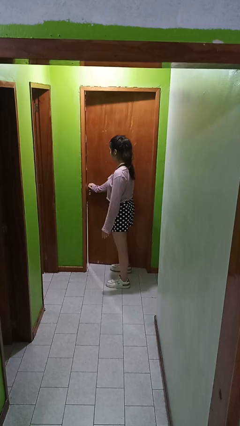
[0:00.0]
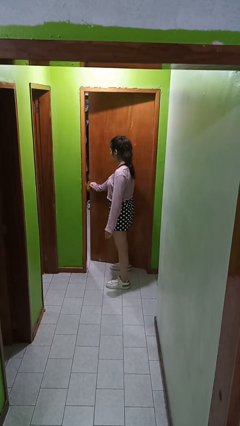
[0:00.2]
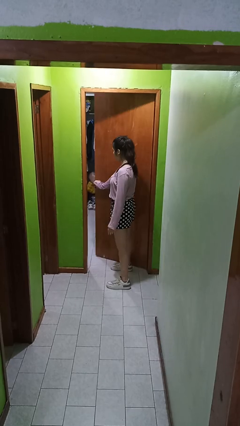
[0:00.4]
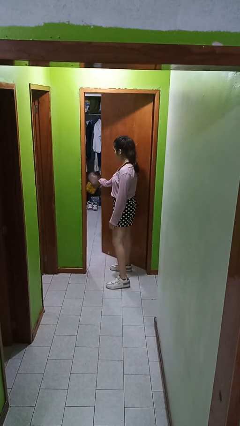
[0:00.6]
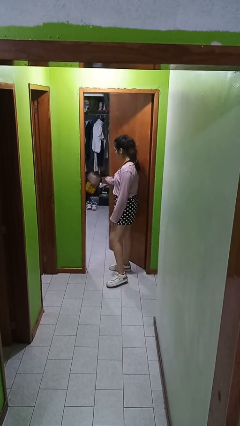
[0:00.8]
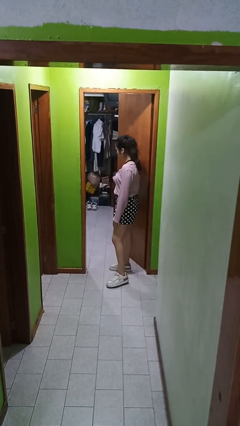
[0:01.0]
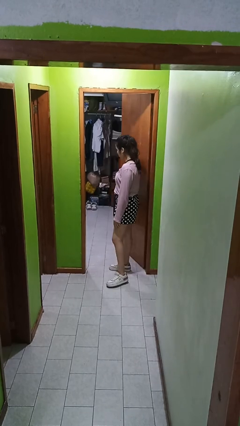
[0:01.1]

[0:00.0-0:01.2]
person opens facility door

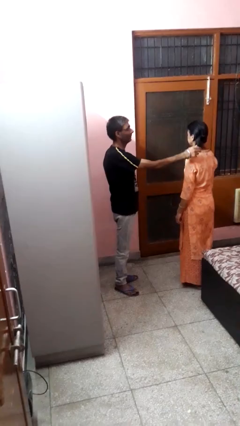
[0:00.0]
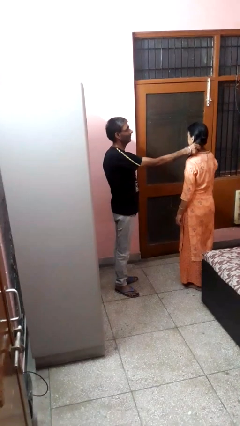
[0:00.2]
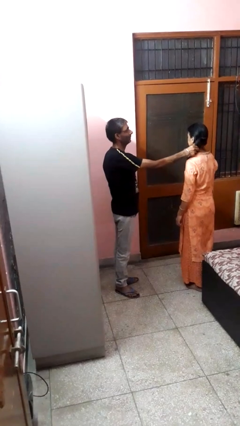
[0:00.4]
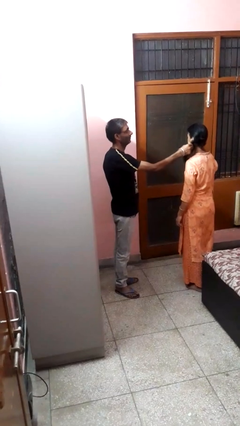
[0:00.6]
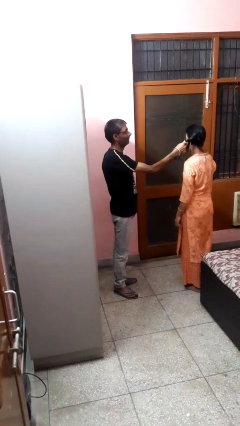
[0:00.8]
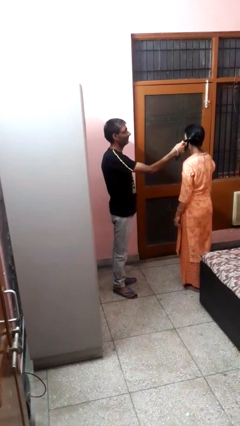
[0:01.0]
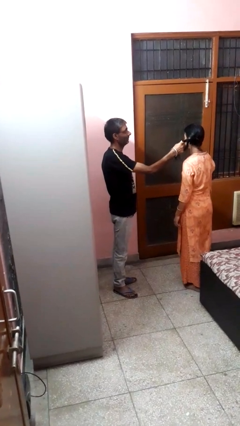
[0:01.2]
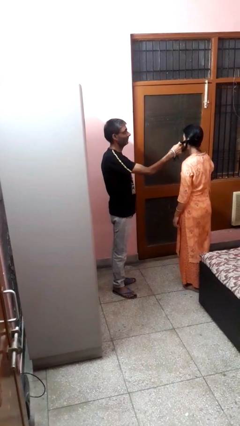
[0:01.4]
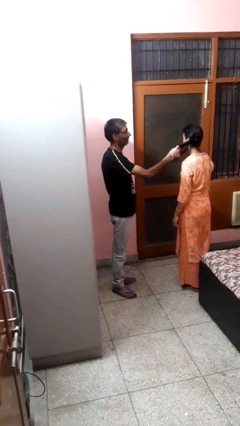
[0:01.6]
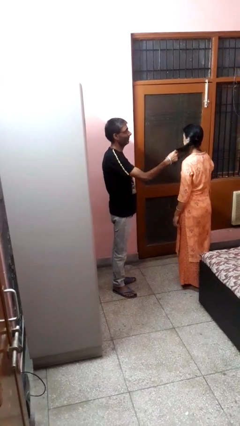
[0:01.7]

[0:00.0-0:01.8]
person grabs person by hair

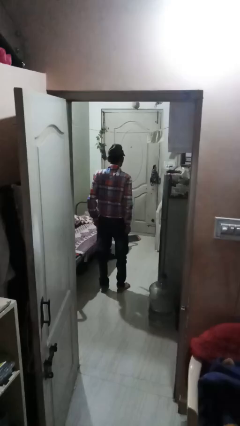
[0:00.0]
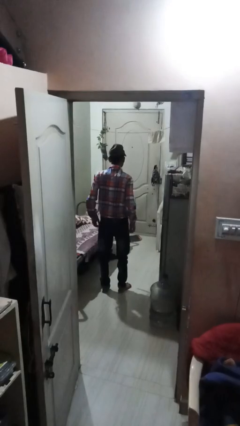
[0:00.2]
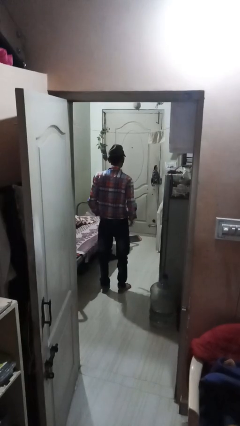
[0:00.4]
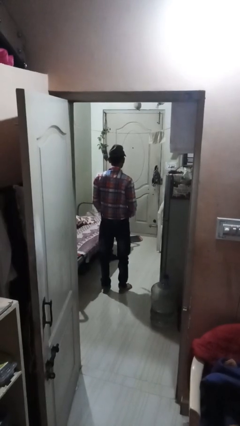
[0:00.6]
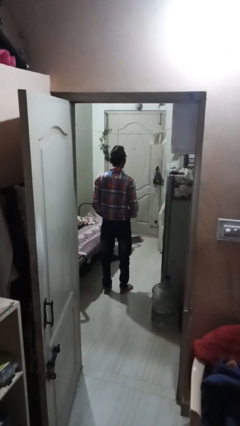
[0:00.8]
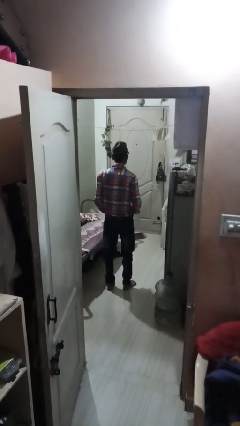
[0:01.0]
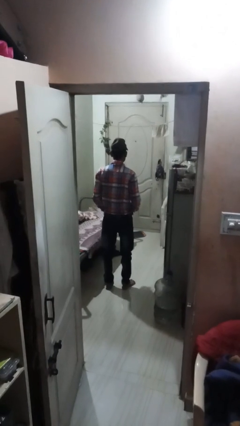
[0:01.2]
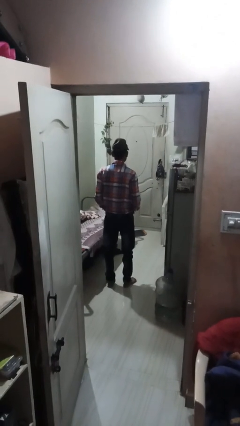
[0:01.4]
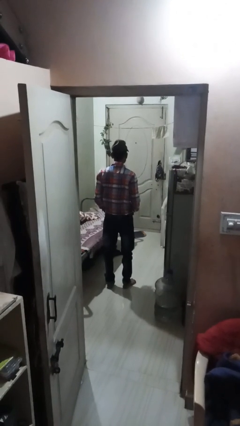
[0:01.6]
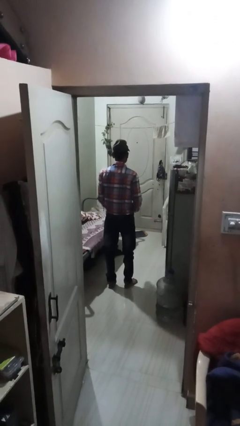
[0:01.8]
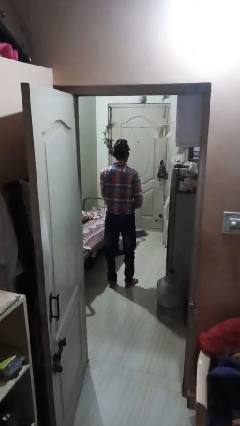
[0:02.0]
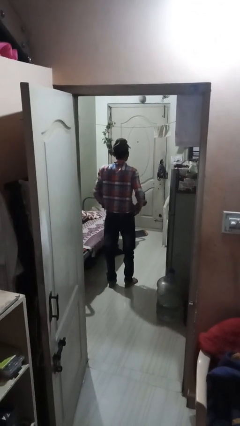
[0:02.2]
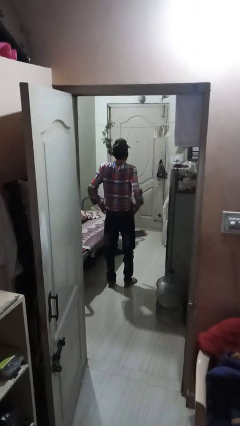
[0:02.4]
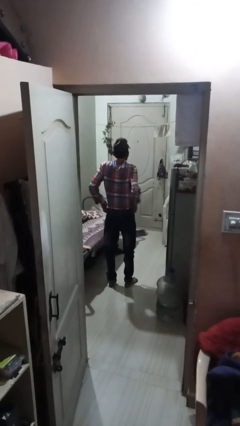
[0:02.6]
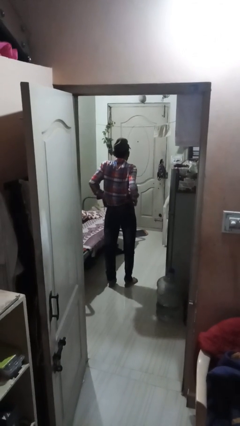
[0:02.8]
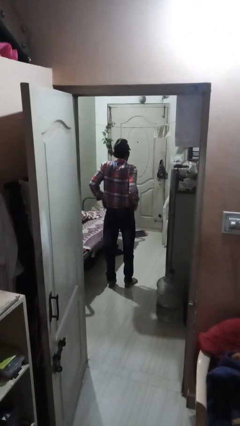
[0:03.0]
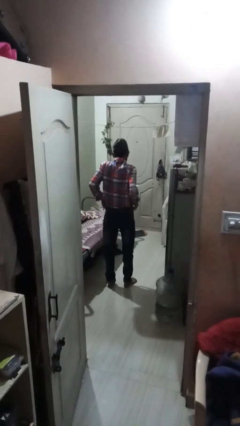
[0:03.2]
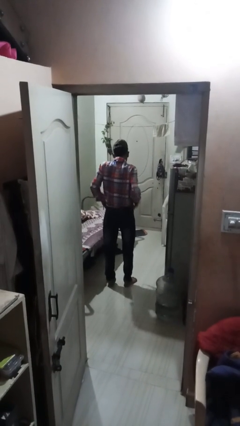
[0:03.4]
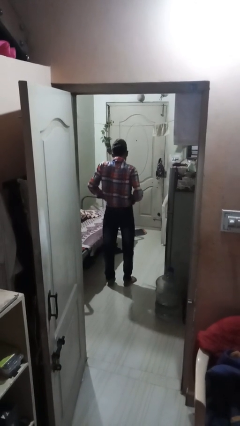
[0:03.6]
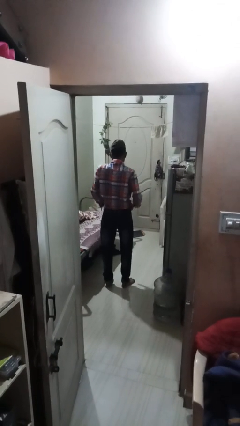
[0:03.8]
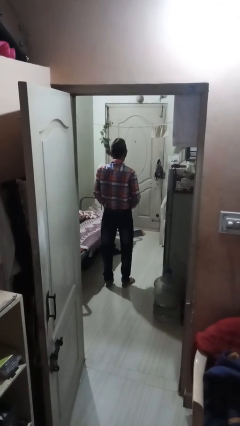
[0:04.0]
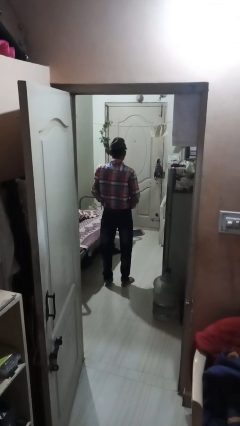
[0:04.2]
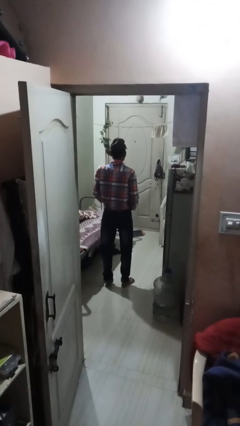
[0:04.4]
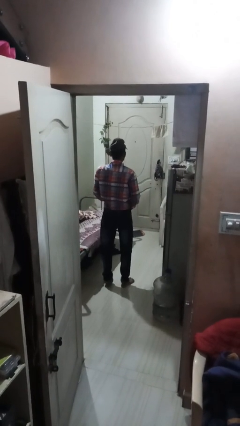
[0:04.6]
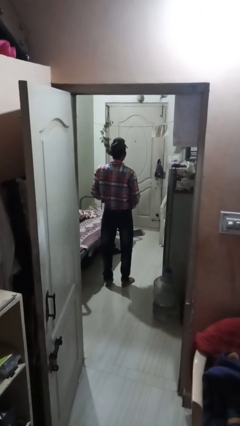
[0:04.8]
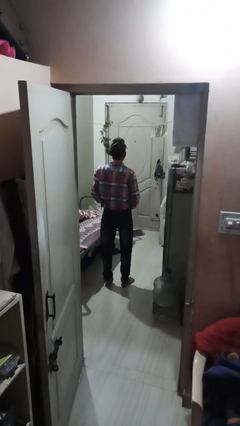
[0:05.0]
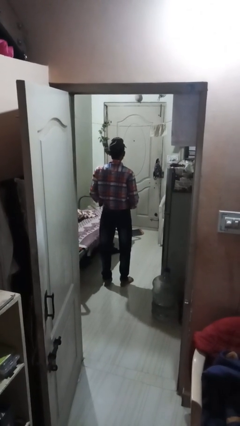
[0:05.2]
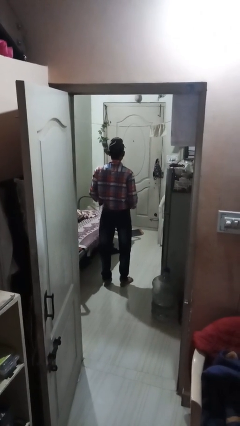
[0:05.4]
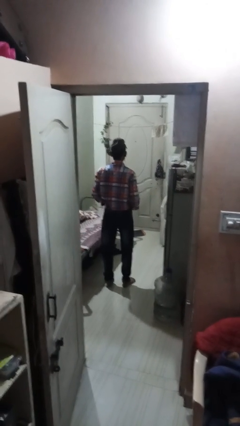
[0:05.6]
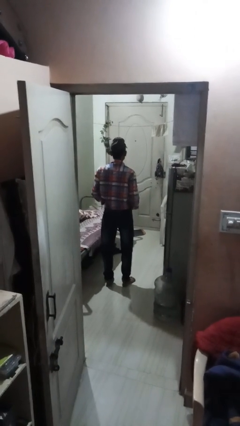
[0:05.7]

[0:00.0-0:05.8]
person hikes up pants

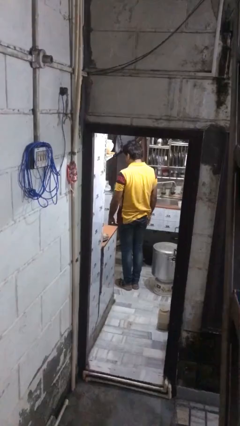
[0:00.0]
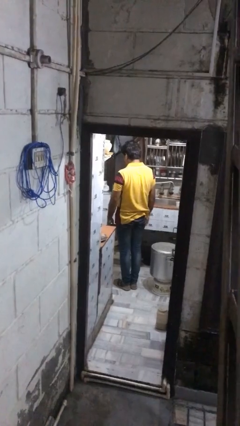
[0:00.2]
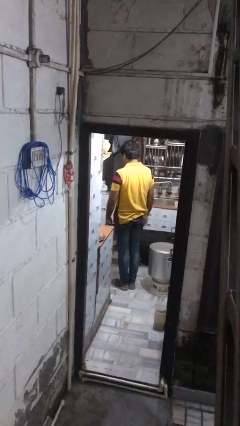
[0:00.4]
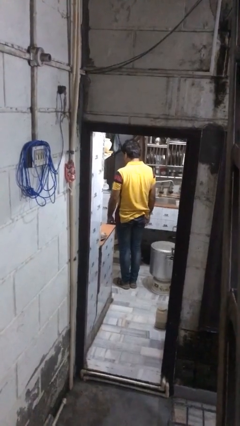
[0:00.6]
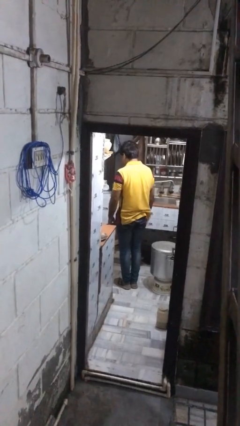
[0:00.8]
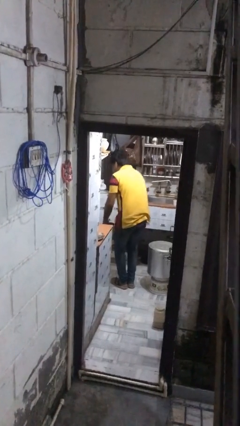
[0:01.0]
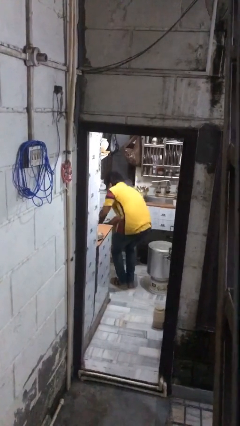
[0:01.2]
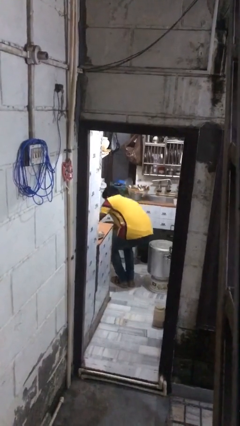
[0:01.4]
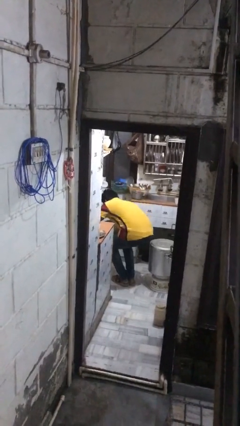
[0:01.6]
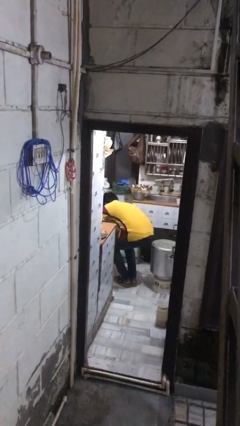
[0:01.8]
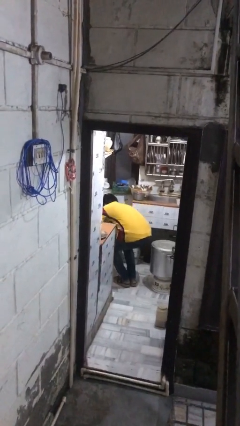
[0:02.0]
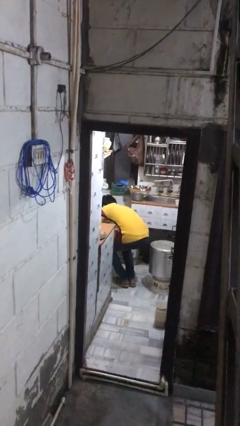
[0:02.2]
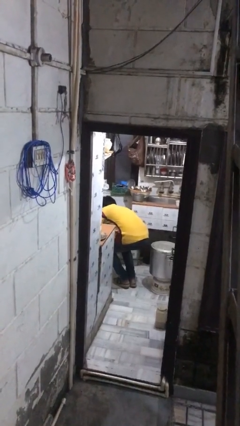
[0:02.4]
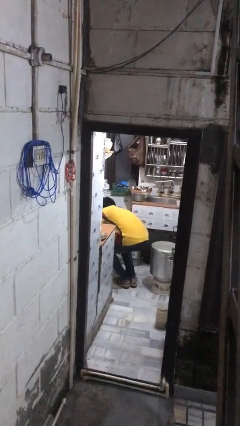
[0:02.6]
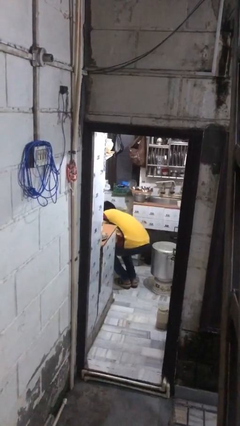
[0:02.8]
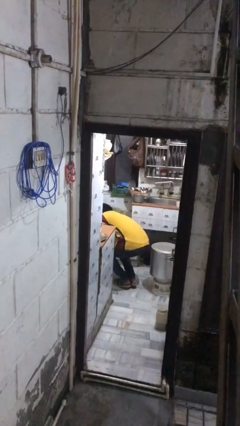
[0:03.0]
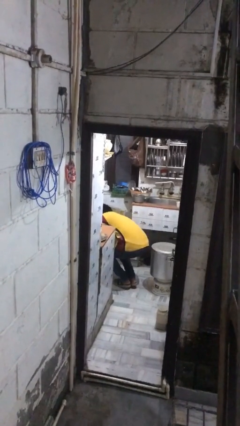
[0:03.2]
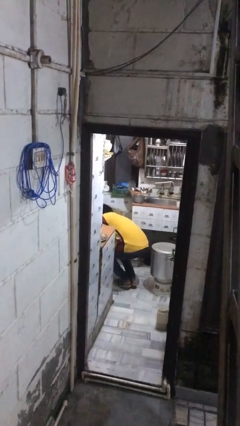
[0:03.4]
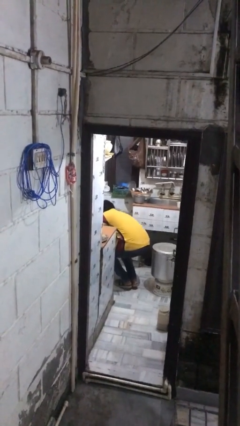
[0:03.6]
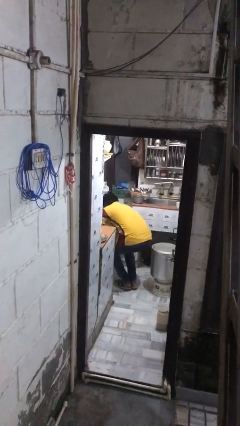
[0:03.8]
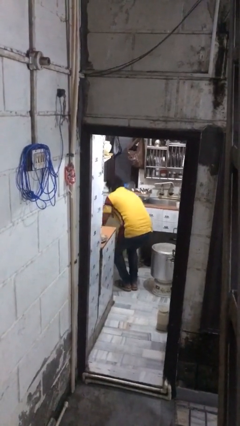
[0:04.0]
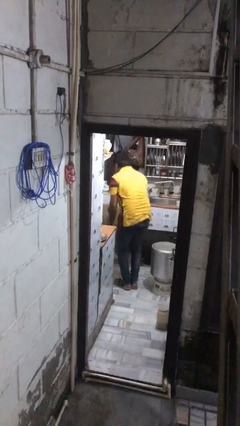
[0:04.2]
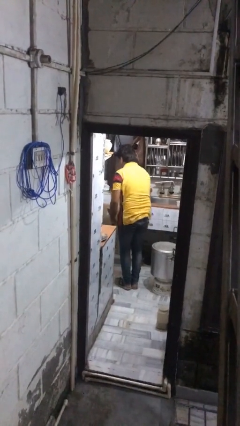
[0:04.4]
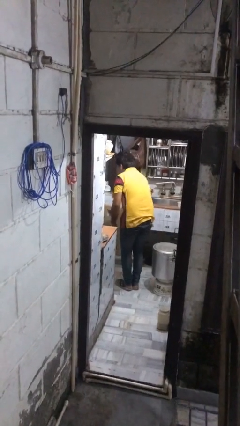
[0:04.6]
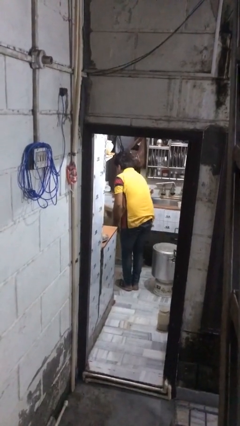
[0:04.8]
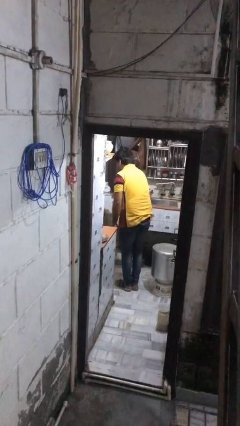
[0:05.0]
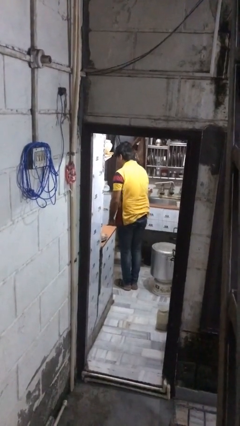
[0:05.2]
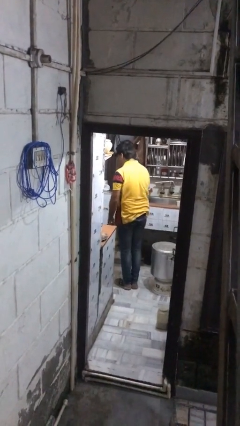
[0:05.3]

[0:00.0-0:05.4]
person searches in kitchen drawer

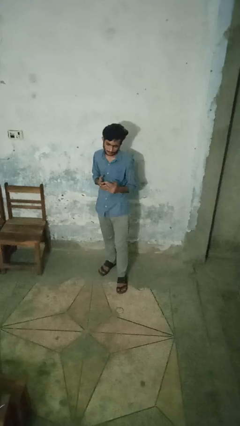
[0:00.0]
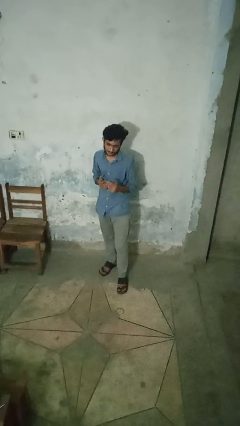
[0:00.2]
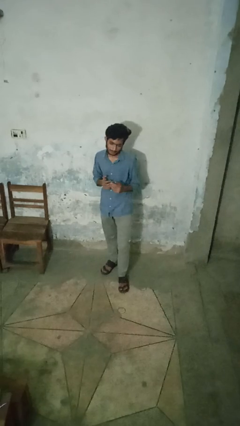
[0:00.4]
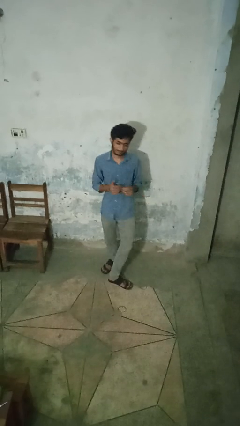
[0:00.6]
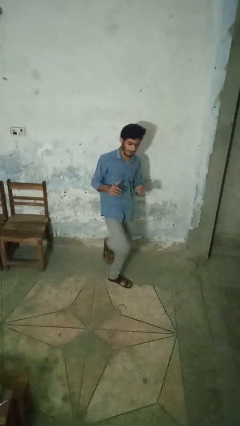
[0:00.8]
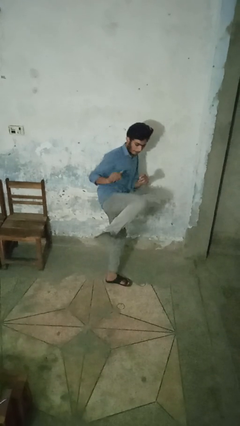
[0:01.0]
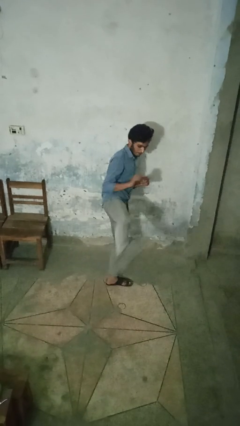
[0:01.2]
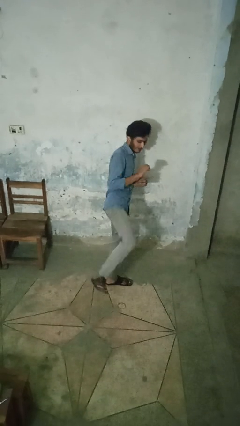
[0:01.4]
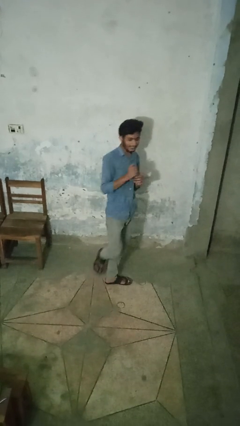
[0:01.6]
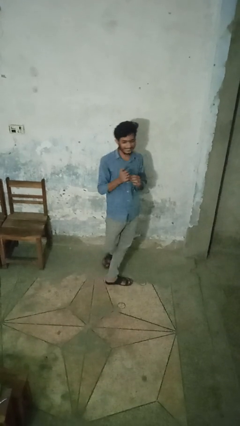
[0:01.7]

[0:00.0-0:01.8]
person karate kicks

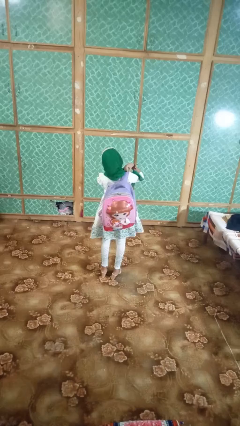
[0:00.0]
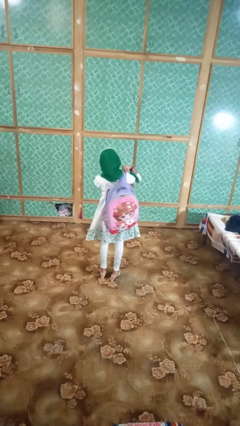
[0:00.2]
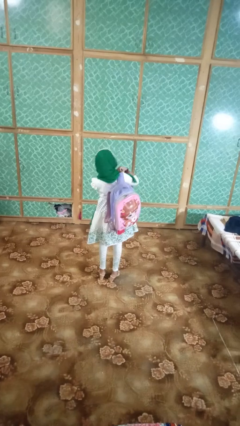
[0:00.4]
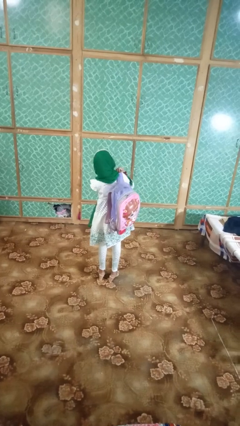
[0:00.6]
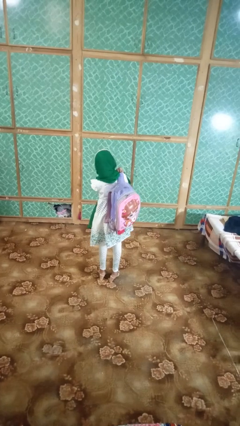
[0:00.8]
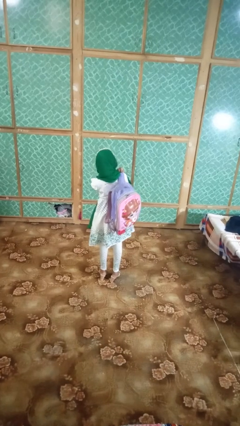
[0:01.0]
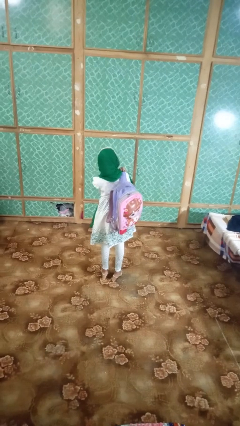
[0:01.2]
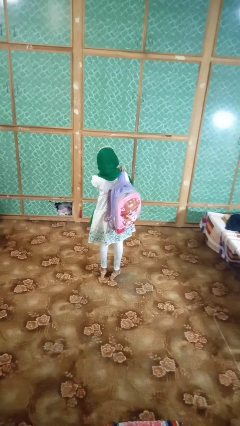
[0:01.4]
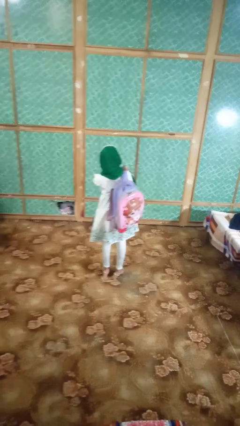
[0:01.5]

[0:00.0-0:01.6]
person puts on backpack
